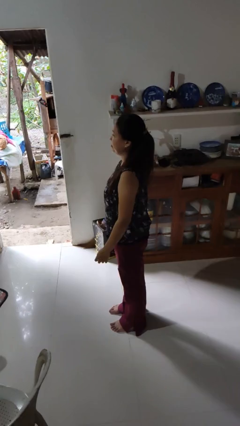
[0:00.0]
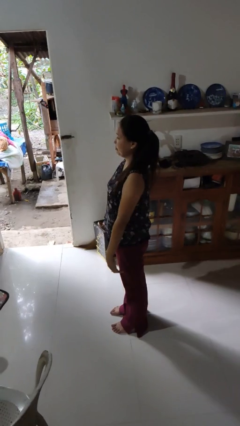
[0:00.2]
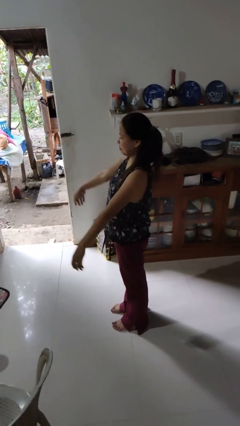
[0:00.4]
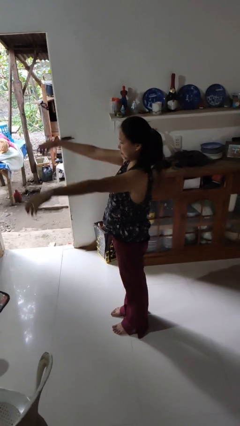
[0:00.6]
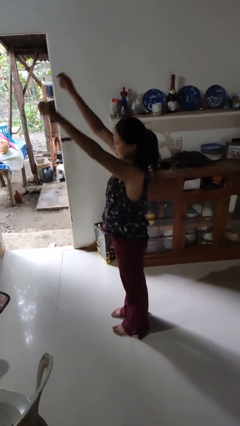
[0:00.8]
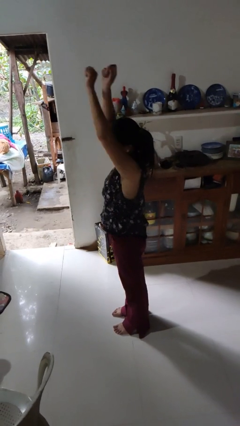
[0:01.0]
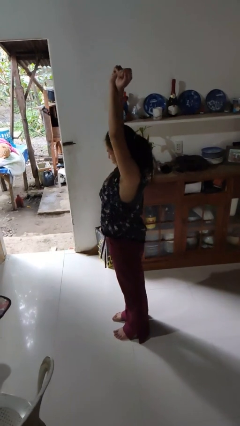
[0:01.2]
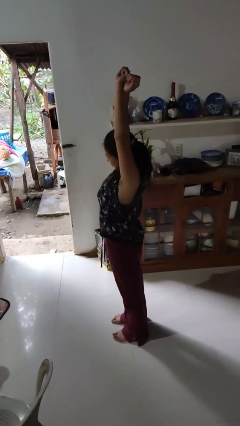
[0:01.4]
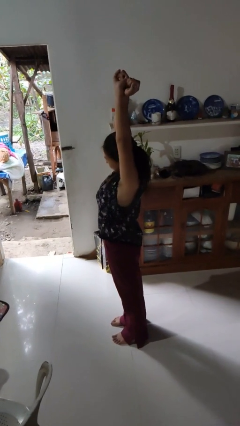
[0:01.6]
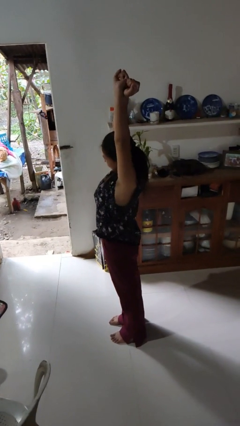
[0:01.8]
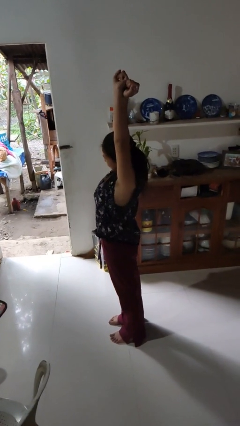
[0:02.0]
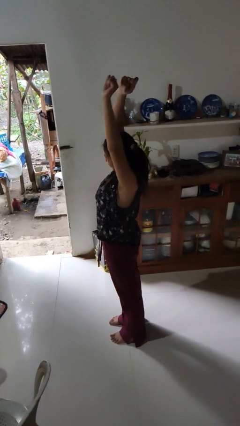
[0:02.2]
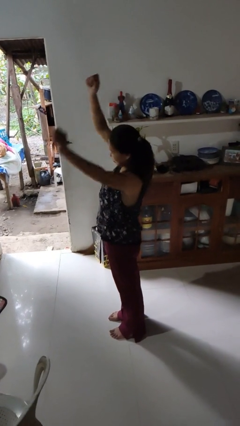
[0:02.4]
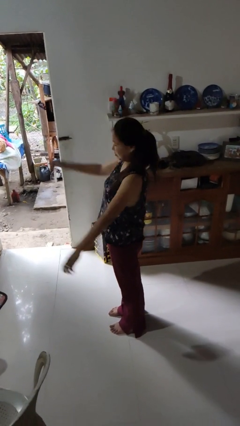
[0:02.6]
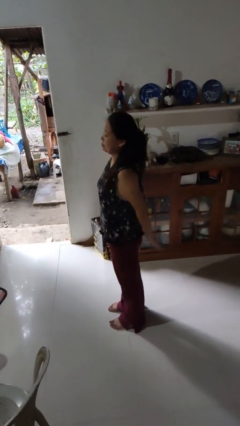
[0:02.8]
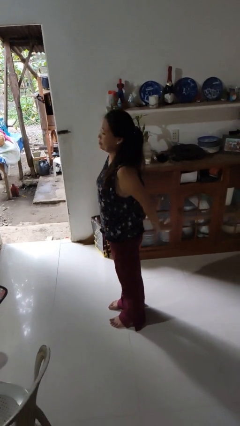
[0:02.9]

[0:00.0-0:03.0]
person stretches arms over head

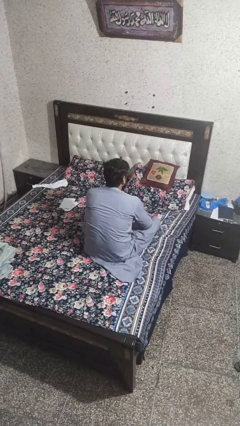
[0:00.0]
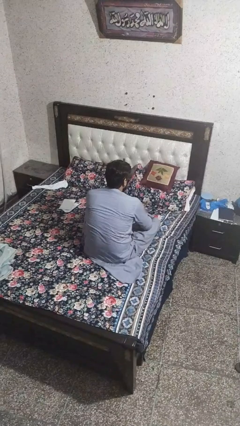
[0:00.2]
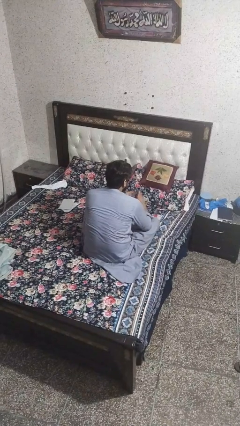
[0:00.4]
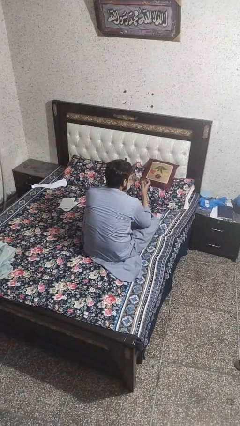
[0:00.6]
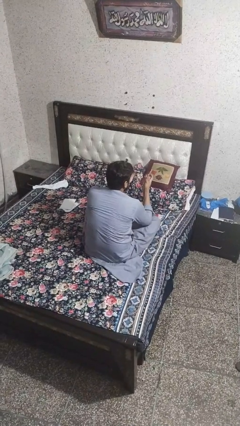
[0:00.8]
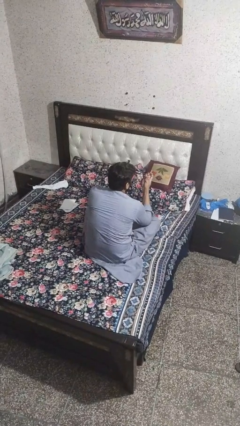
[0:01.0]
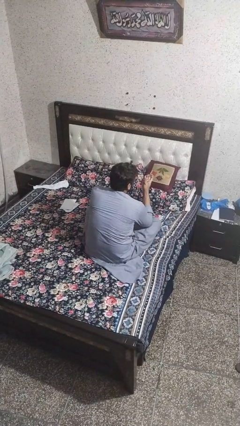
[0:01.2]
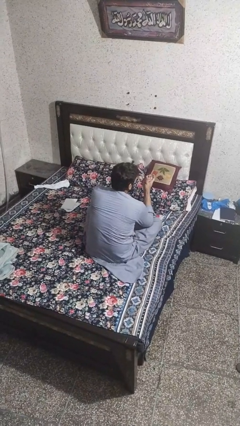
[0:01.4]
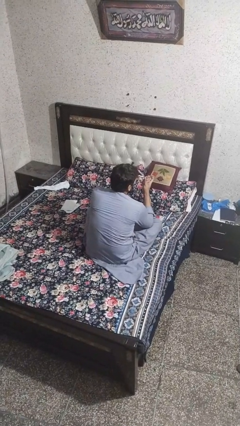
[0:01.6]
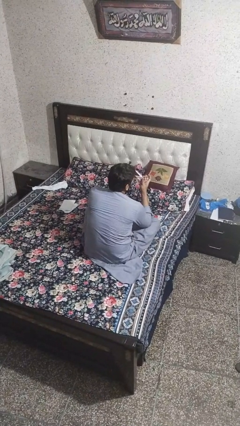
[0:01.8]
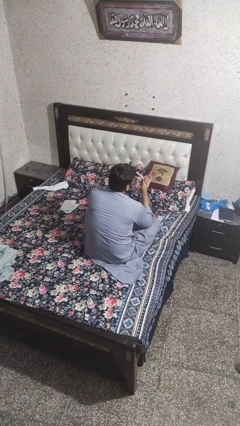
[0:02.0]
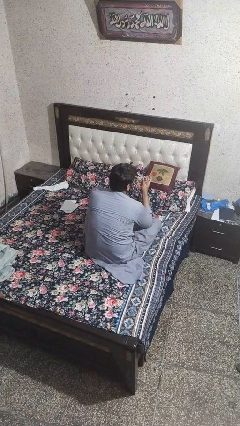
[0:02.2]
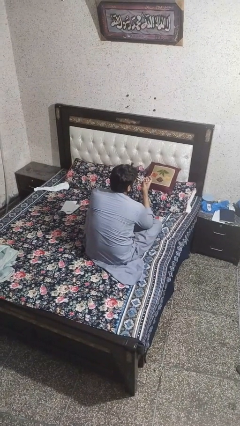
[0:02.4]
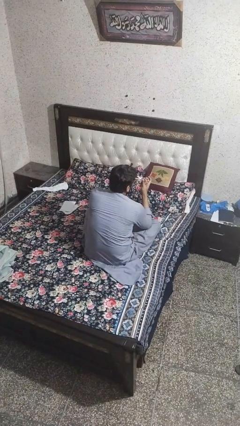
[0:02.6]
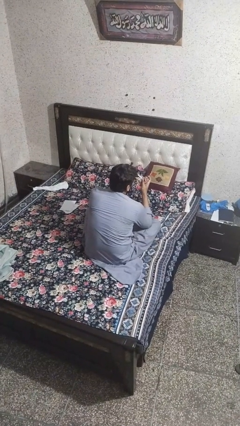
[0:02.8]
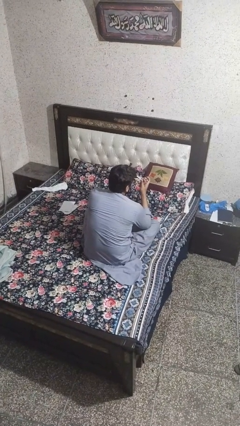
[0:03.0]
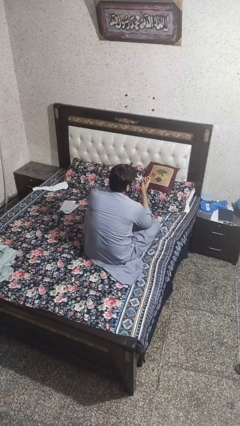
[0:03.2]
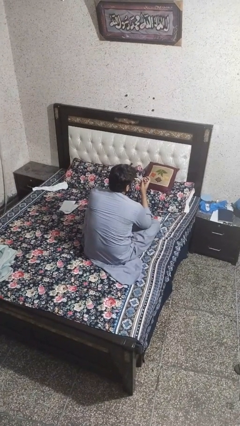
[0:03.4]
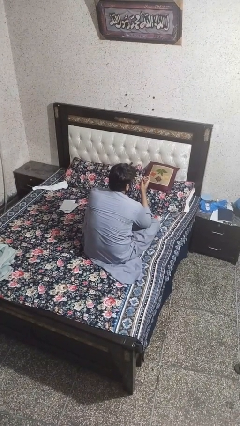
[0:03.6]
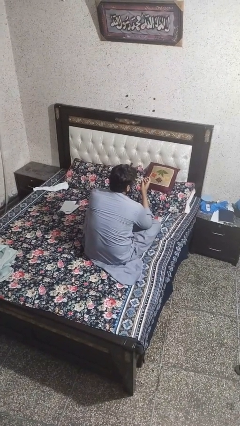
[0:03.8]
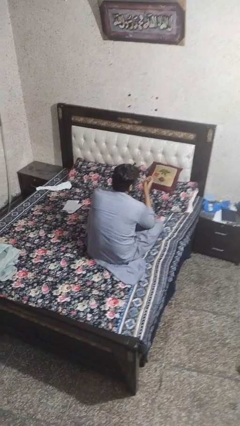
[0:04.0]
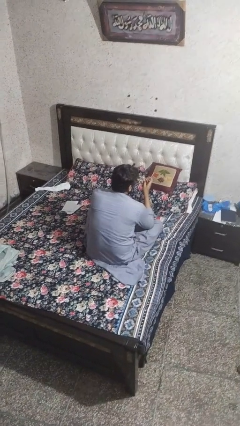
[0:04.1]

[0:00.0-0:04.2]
person clips fingernails

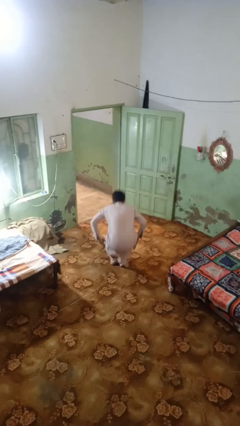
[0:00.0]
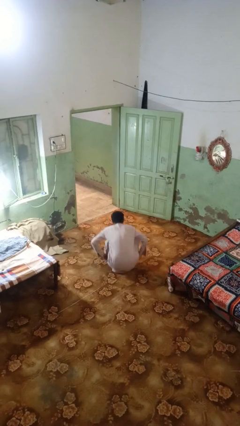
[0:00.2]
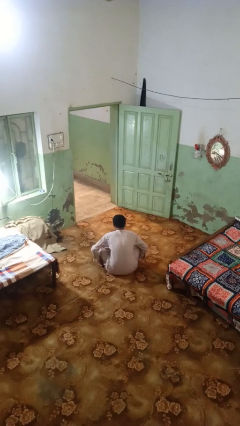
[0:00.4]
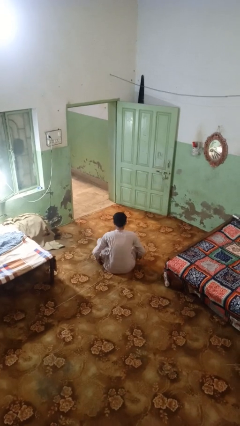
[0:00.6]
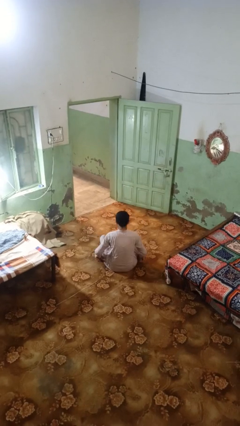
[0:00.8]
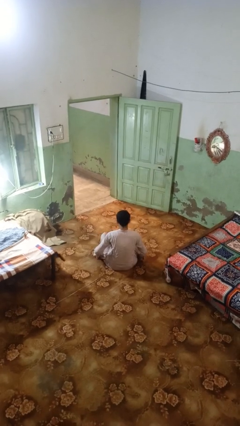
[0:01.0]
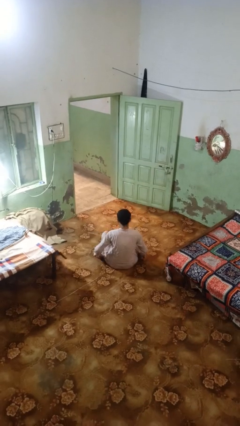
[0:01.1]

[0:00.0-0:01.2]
person sits crisscross

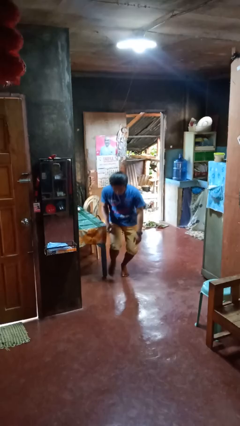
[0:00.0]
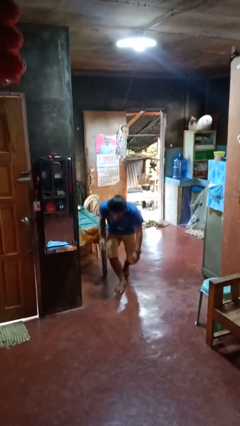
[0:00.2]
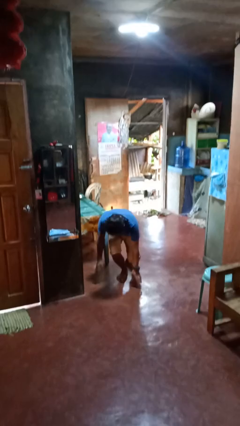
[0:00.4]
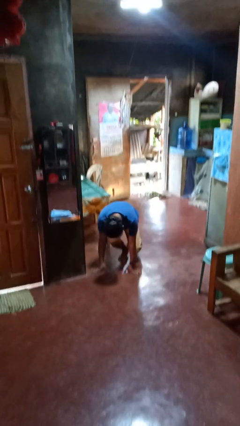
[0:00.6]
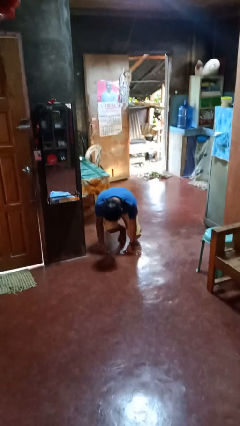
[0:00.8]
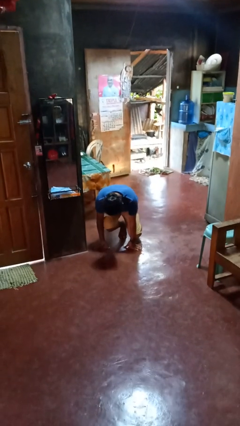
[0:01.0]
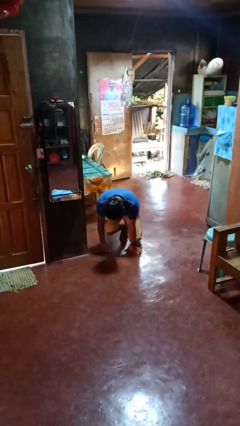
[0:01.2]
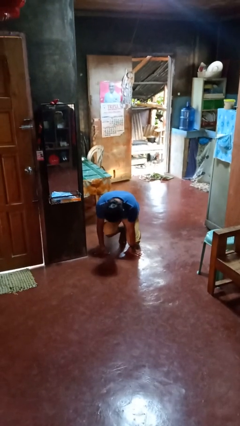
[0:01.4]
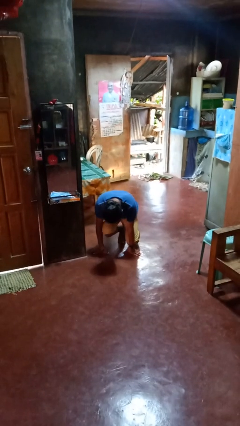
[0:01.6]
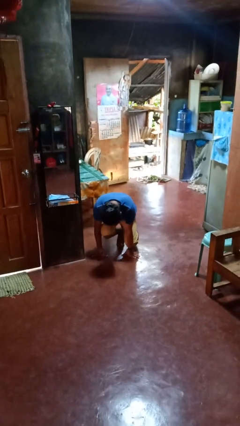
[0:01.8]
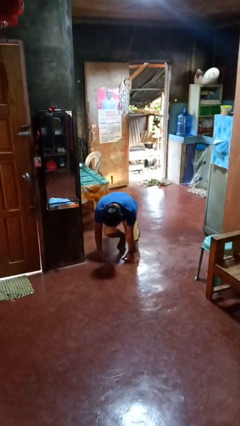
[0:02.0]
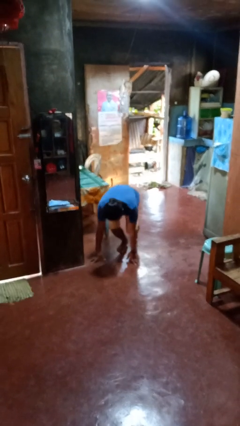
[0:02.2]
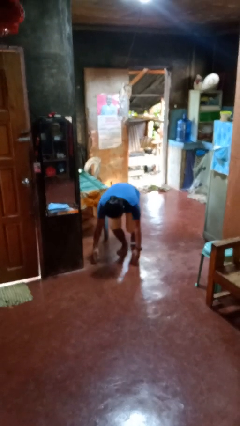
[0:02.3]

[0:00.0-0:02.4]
person trips on object on floor

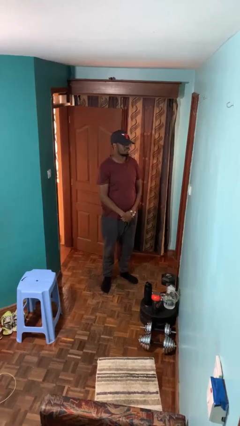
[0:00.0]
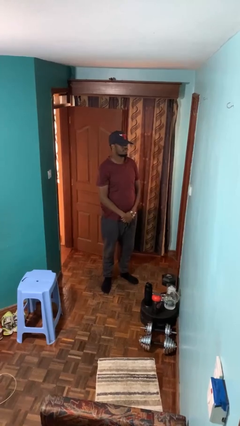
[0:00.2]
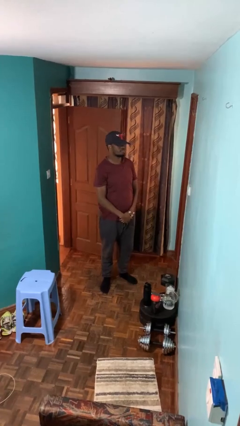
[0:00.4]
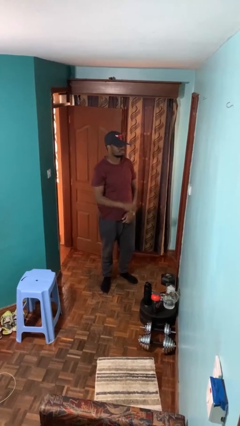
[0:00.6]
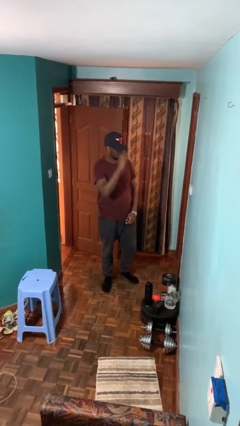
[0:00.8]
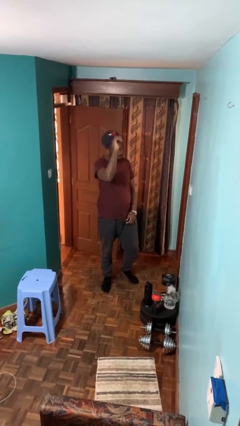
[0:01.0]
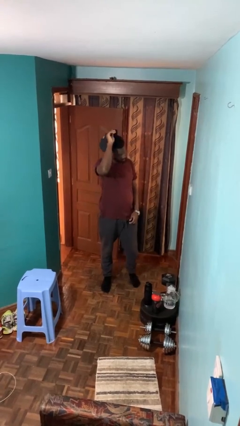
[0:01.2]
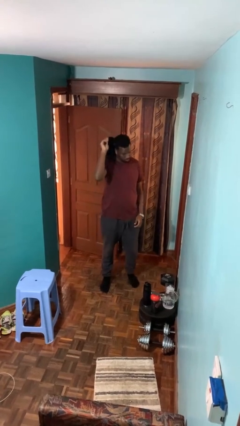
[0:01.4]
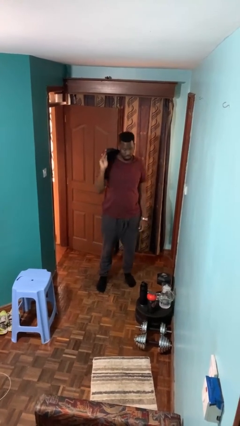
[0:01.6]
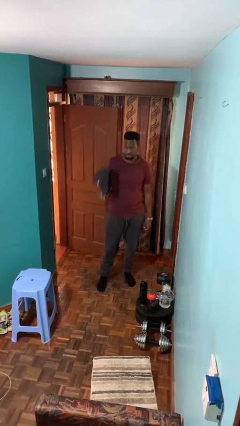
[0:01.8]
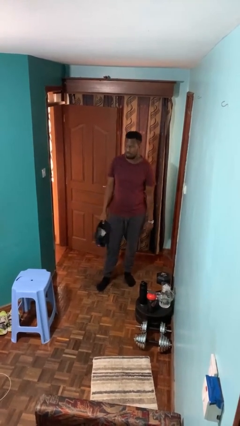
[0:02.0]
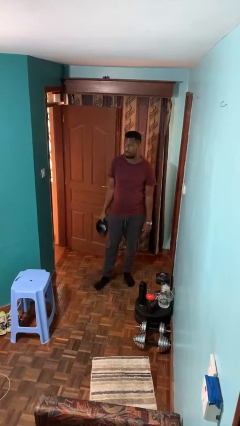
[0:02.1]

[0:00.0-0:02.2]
person takes off hat

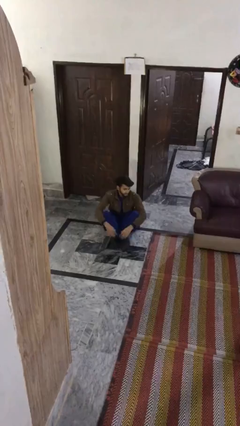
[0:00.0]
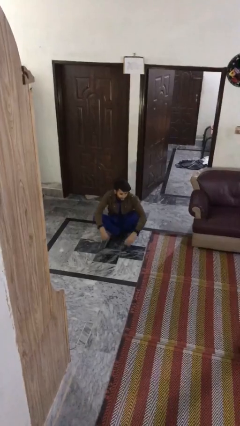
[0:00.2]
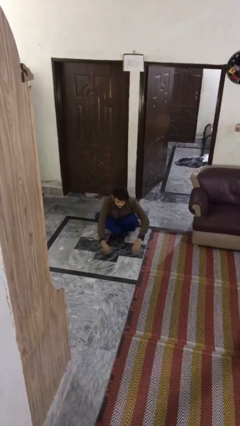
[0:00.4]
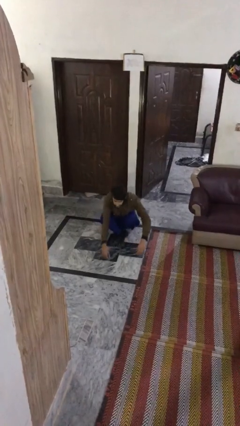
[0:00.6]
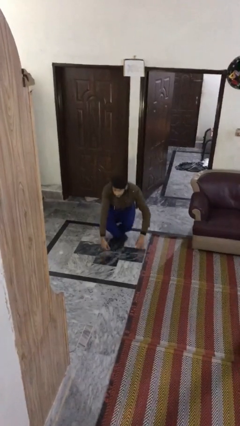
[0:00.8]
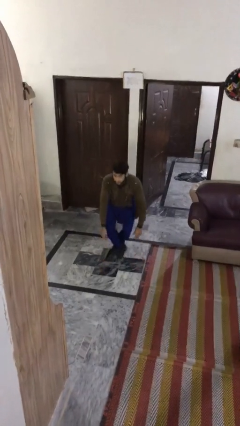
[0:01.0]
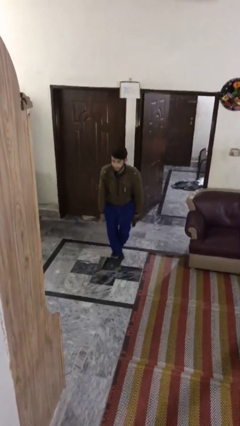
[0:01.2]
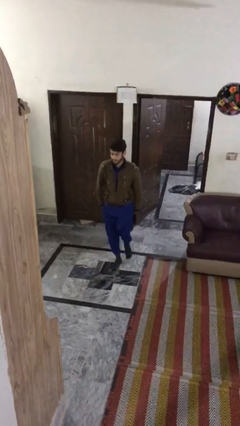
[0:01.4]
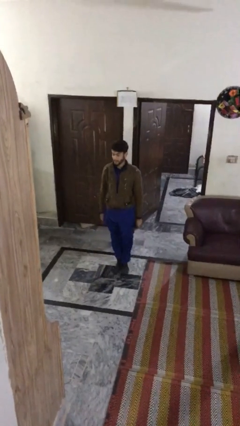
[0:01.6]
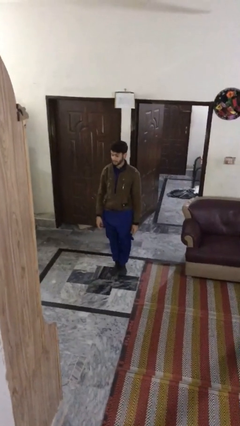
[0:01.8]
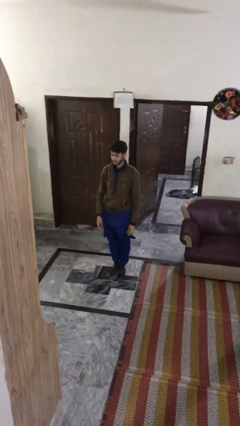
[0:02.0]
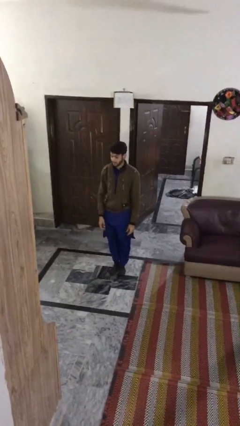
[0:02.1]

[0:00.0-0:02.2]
person stands up

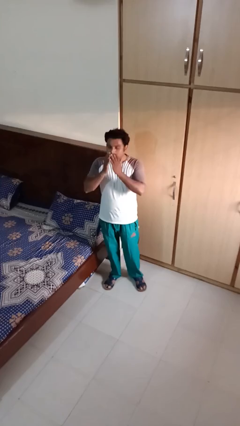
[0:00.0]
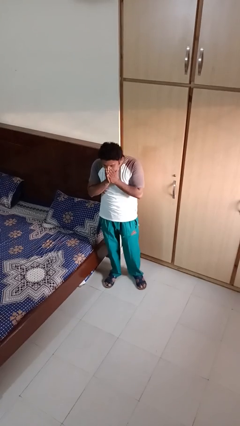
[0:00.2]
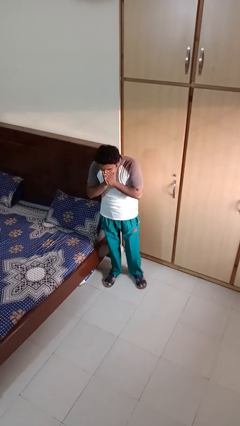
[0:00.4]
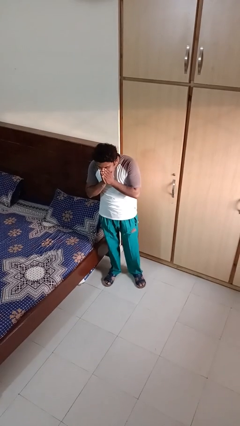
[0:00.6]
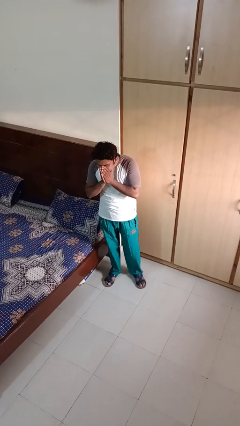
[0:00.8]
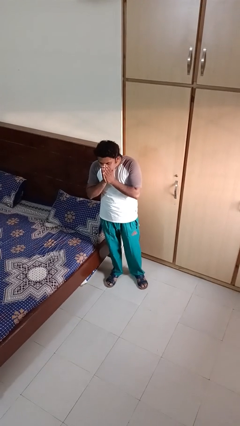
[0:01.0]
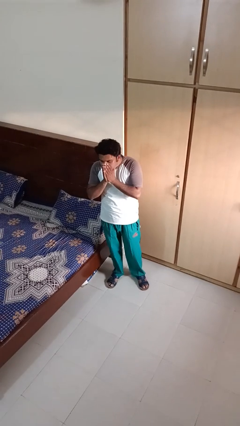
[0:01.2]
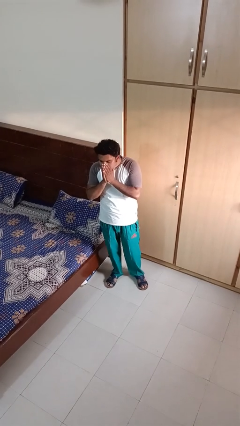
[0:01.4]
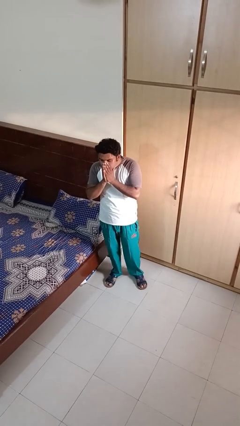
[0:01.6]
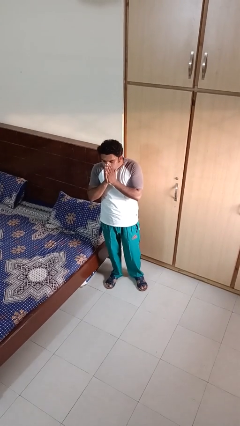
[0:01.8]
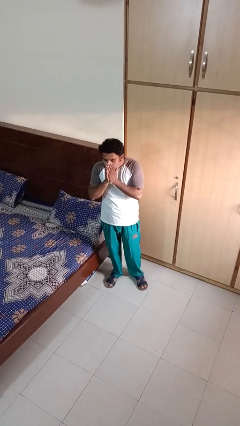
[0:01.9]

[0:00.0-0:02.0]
person sneezes into hand
